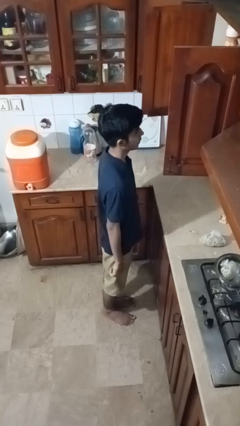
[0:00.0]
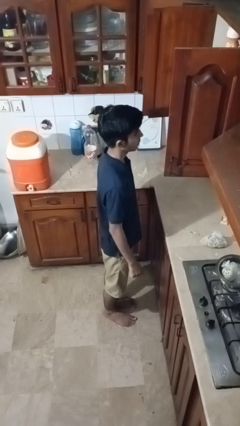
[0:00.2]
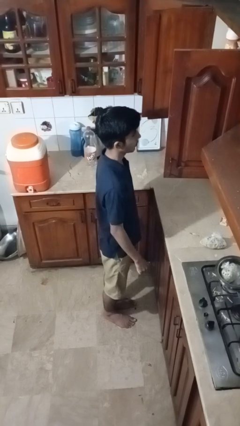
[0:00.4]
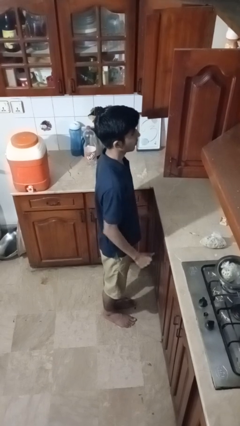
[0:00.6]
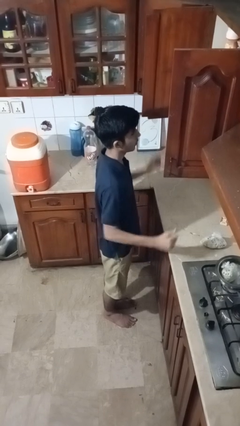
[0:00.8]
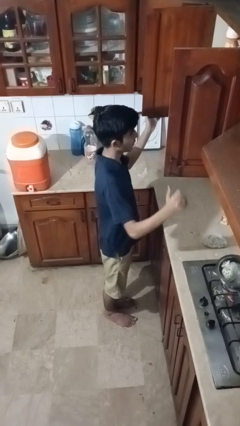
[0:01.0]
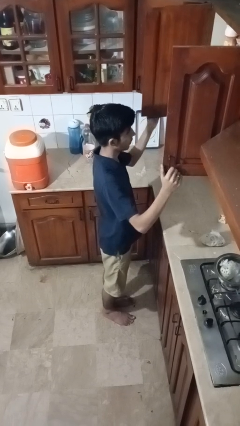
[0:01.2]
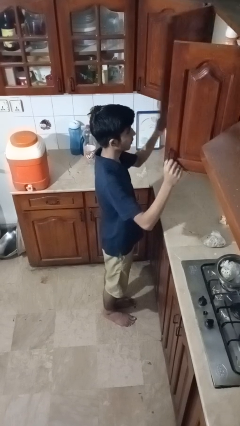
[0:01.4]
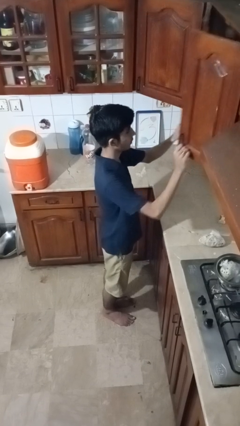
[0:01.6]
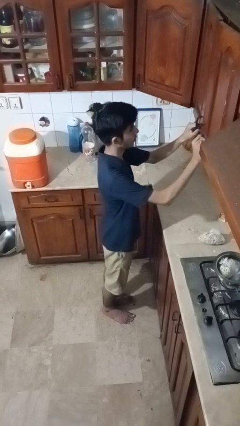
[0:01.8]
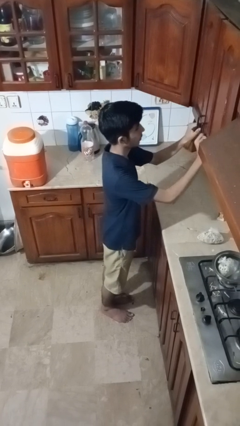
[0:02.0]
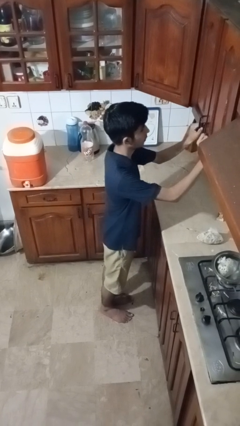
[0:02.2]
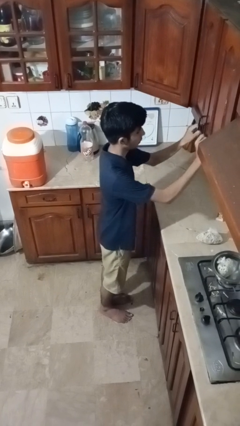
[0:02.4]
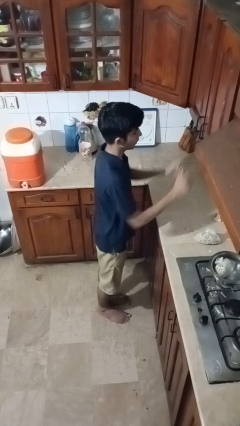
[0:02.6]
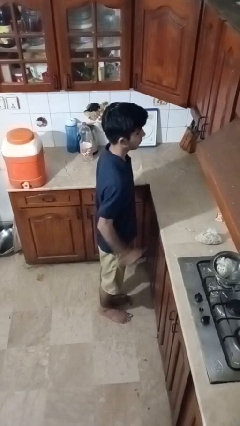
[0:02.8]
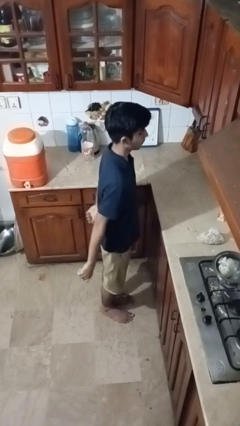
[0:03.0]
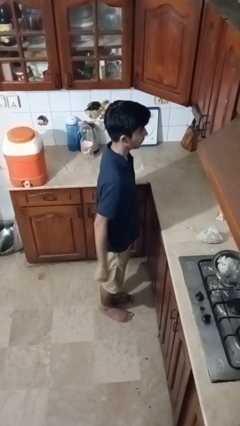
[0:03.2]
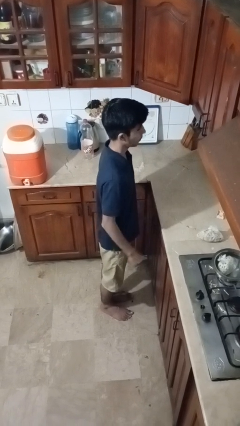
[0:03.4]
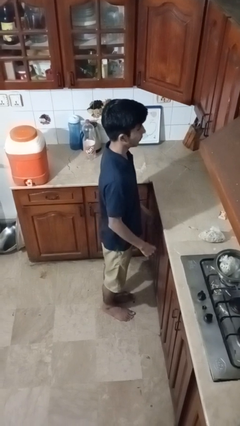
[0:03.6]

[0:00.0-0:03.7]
person closes cabinet

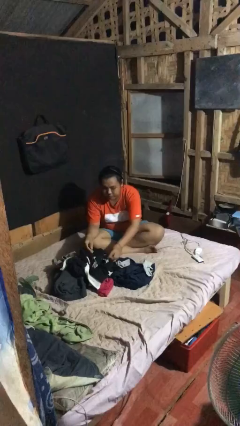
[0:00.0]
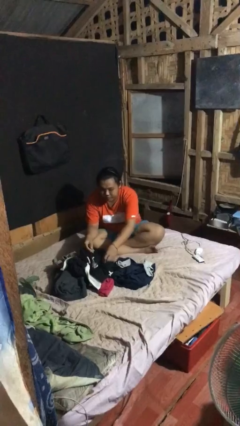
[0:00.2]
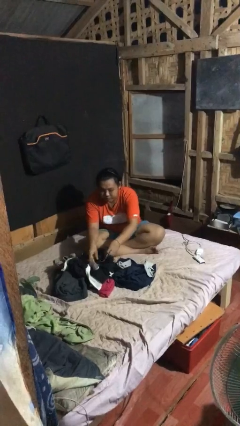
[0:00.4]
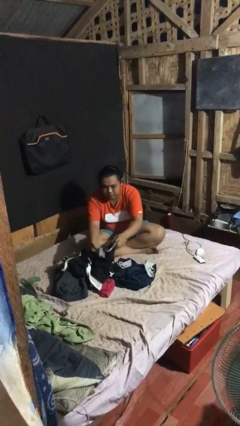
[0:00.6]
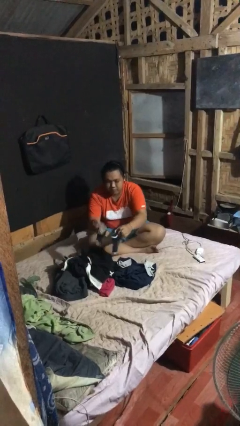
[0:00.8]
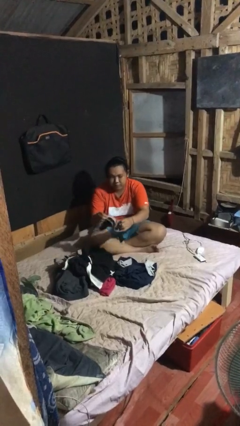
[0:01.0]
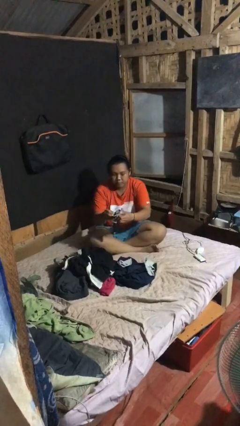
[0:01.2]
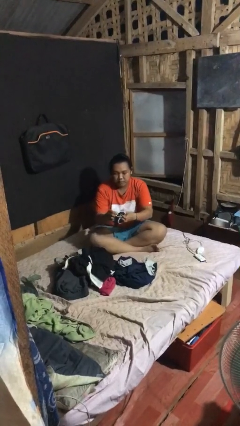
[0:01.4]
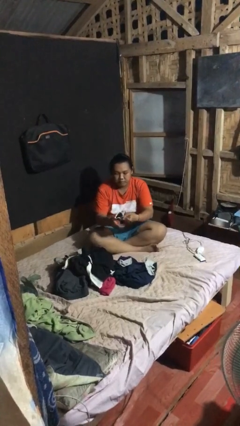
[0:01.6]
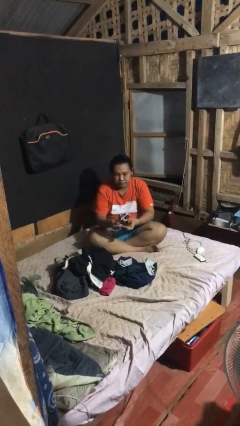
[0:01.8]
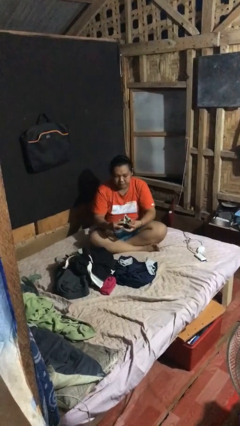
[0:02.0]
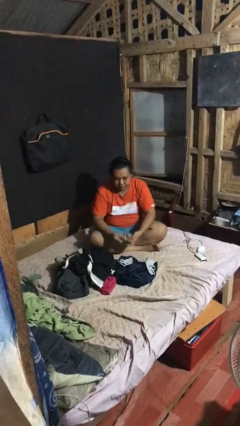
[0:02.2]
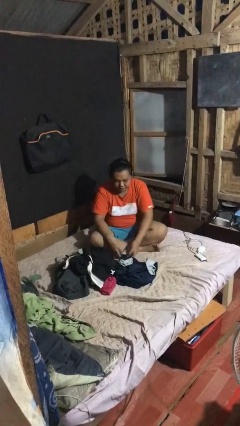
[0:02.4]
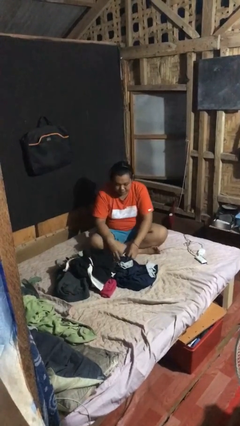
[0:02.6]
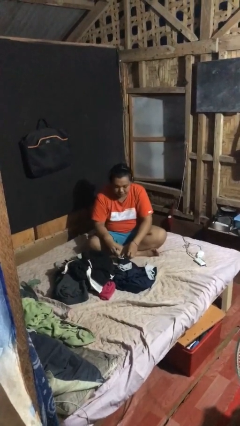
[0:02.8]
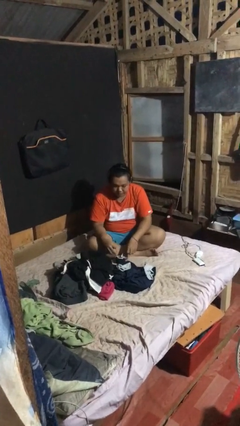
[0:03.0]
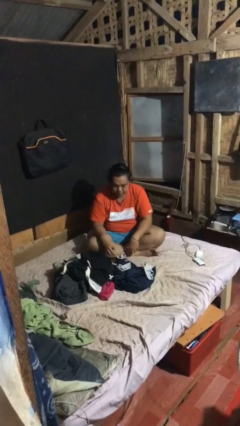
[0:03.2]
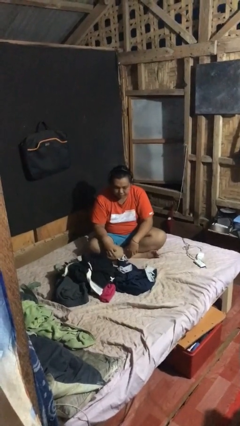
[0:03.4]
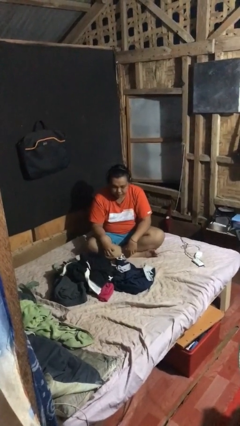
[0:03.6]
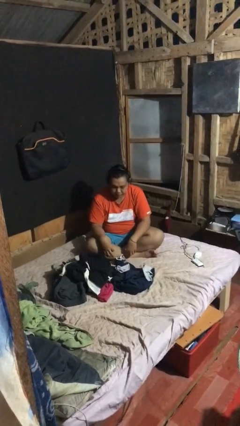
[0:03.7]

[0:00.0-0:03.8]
person folds socks

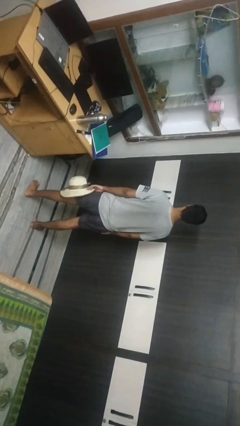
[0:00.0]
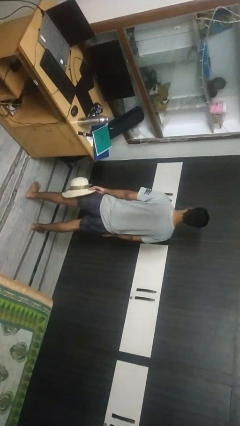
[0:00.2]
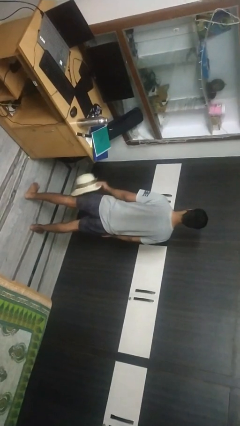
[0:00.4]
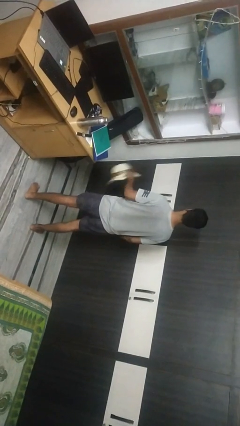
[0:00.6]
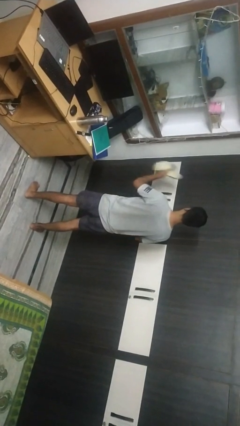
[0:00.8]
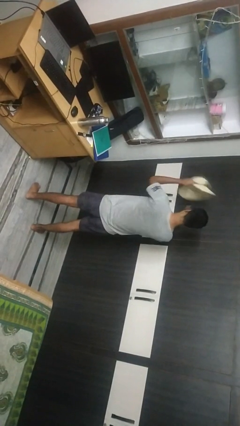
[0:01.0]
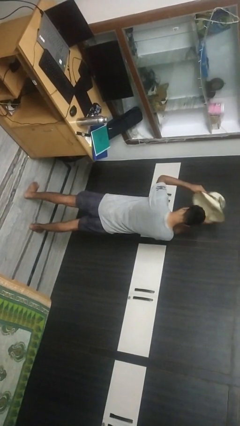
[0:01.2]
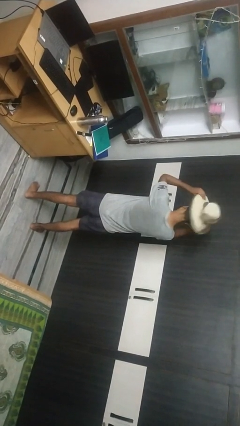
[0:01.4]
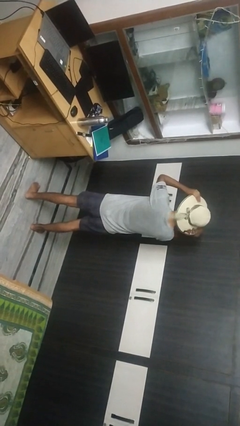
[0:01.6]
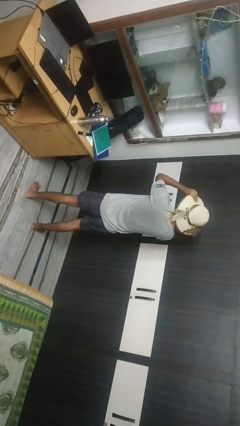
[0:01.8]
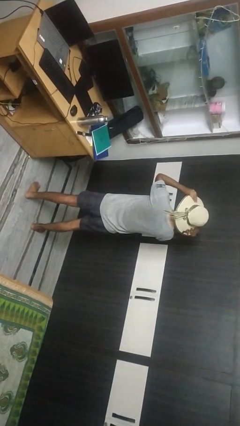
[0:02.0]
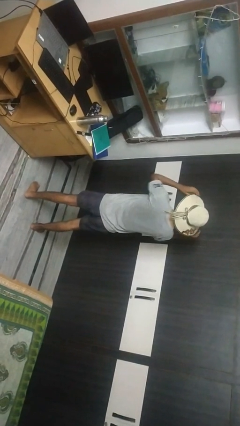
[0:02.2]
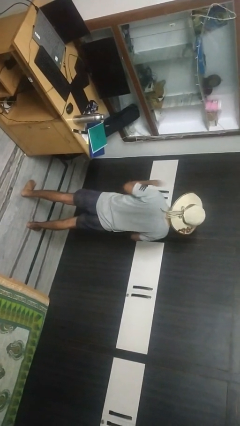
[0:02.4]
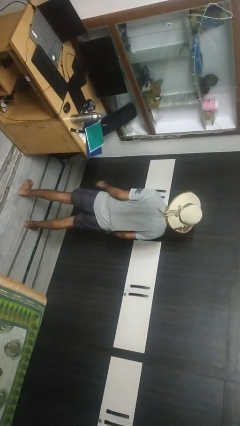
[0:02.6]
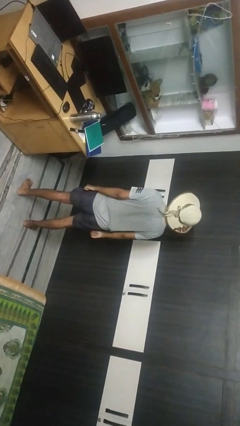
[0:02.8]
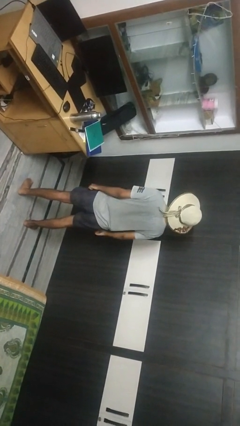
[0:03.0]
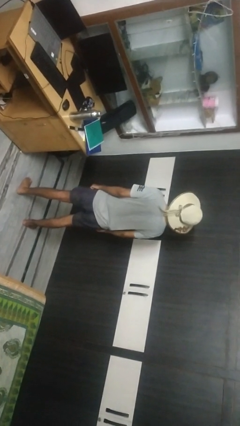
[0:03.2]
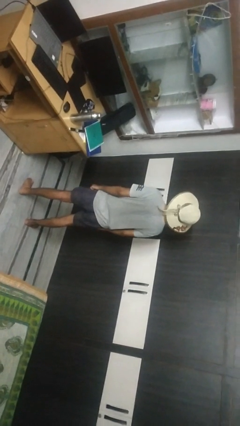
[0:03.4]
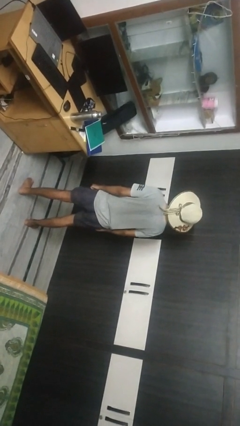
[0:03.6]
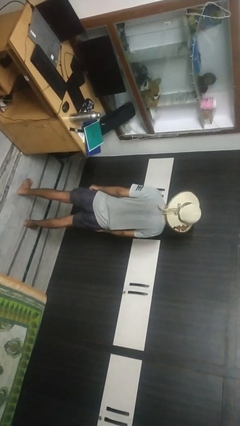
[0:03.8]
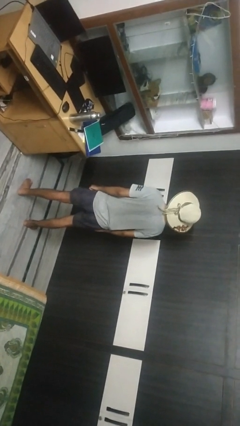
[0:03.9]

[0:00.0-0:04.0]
person puts on hat

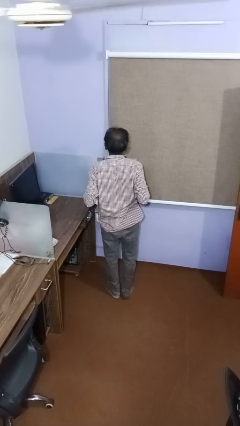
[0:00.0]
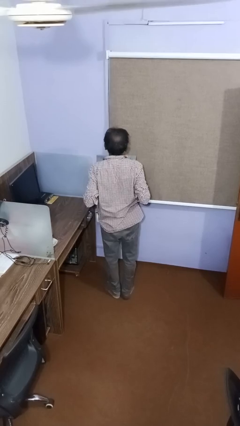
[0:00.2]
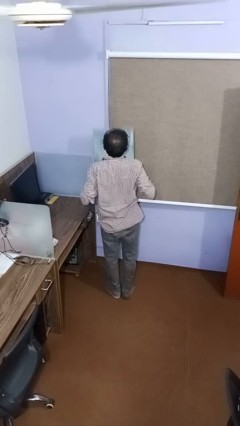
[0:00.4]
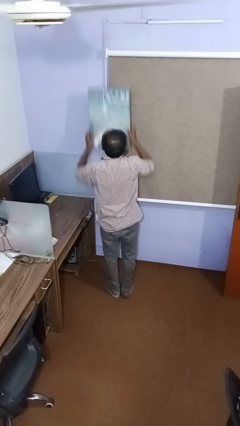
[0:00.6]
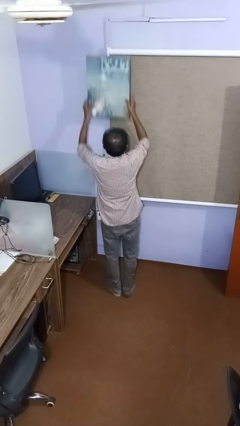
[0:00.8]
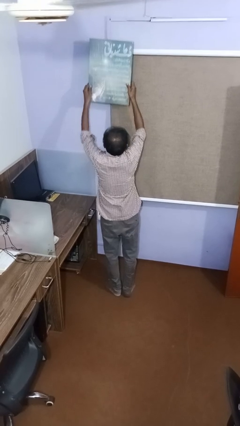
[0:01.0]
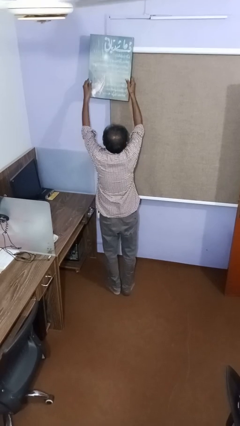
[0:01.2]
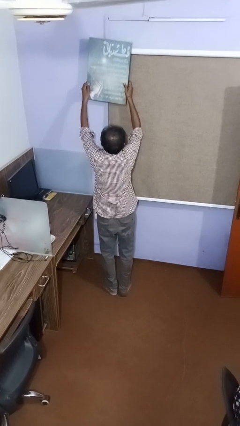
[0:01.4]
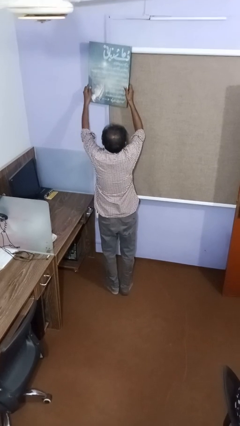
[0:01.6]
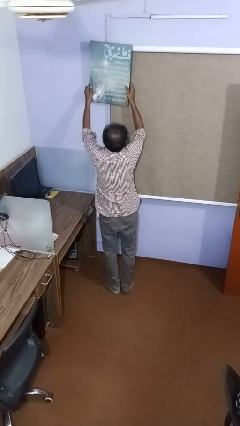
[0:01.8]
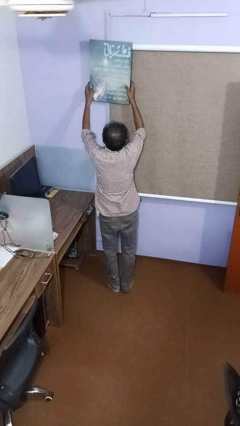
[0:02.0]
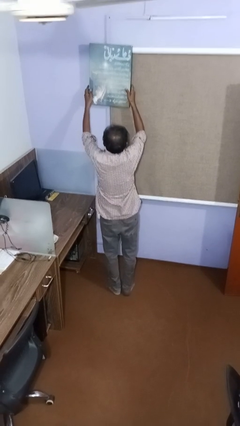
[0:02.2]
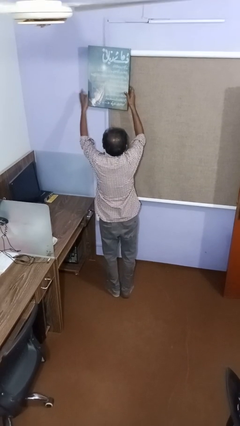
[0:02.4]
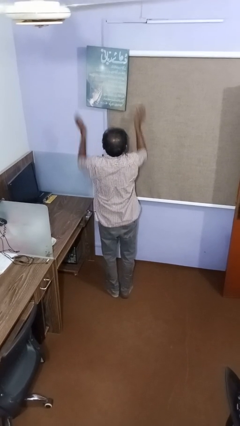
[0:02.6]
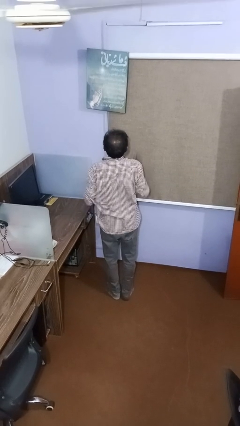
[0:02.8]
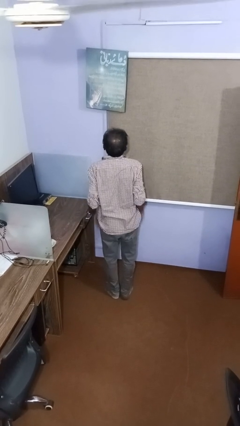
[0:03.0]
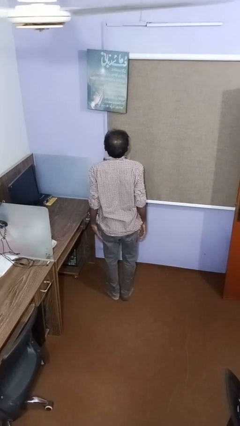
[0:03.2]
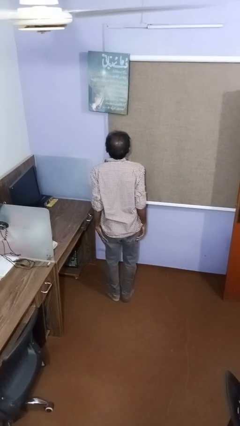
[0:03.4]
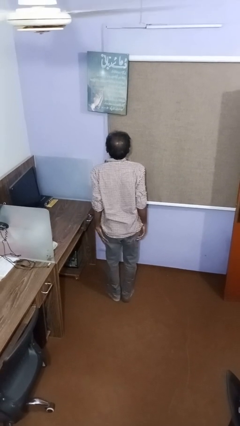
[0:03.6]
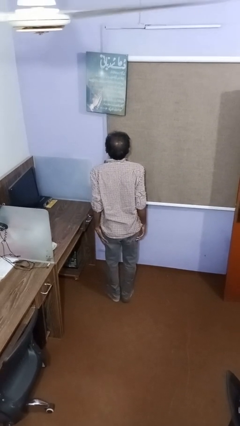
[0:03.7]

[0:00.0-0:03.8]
person puts up picture frame

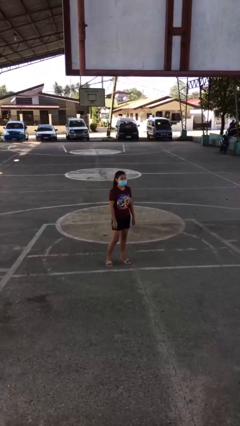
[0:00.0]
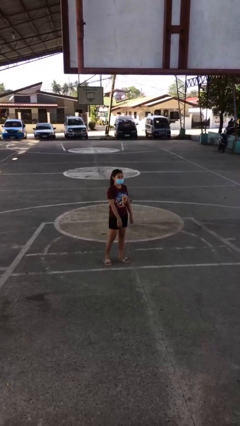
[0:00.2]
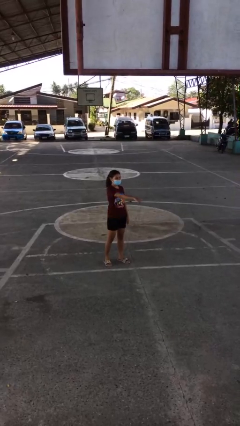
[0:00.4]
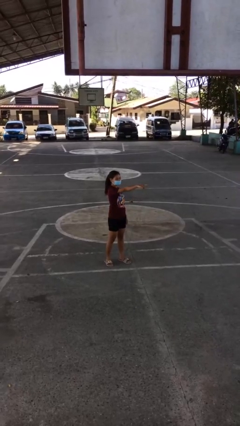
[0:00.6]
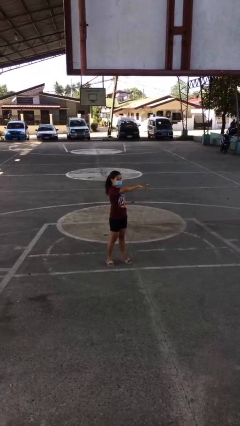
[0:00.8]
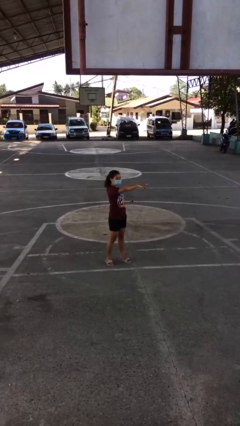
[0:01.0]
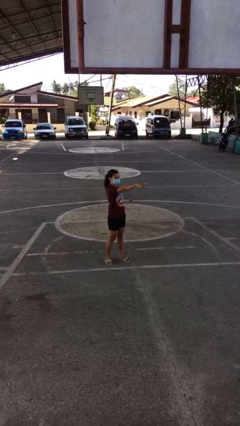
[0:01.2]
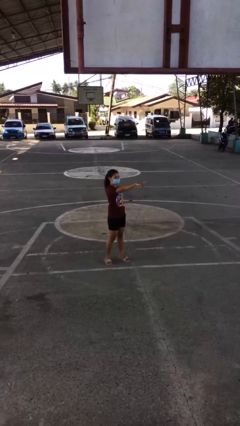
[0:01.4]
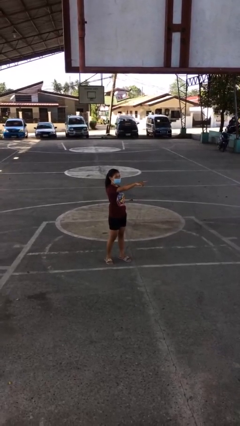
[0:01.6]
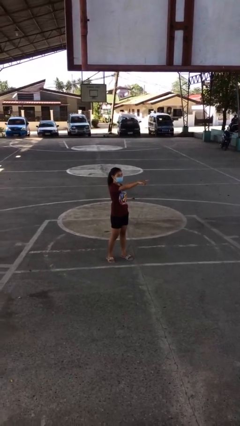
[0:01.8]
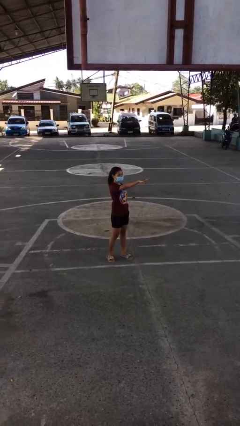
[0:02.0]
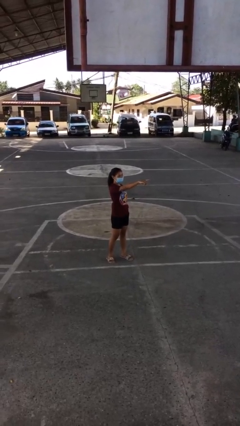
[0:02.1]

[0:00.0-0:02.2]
person points at person

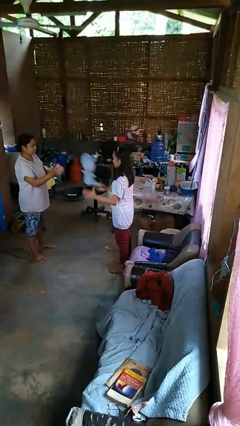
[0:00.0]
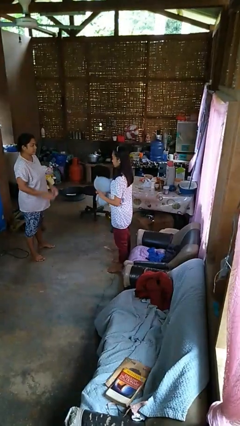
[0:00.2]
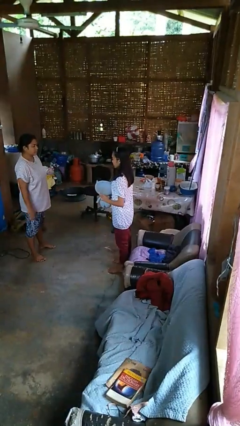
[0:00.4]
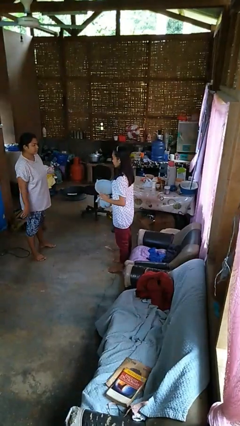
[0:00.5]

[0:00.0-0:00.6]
person catches object from person
